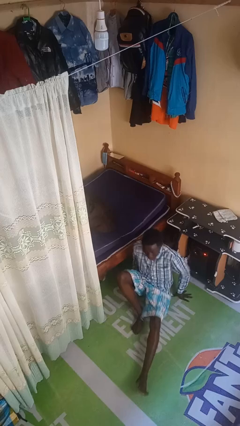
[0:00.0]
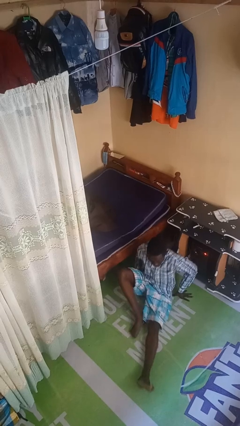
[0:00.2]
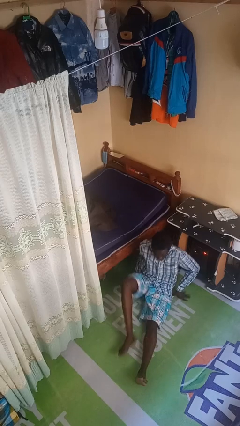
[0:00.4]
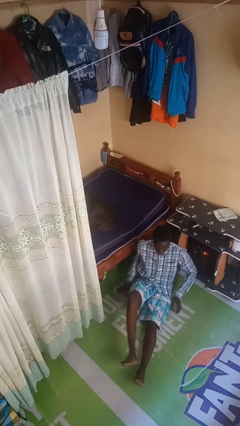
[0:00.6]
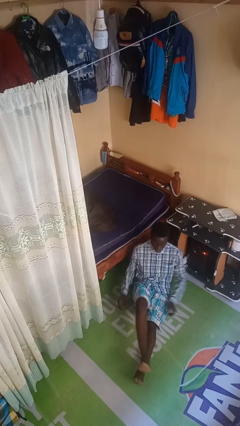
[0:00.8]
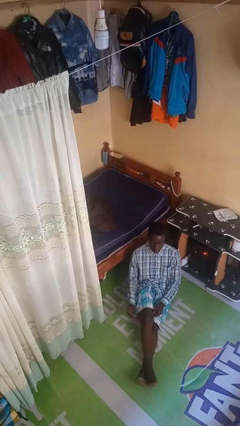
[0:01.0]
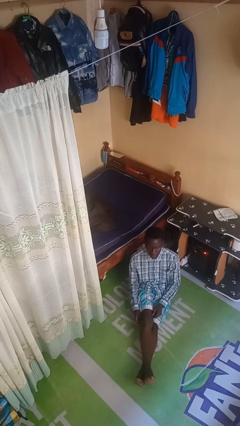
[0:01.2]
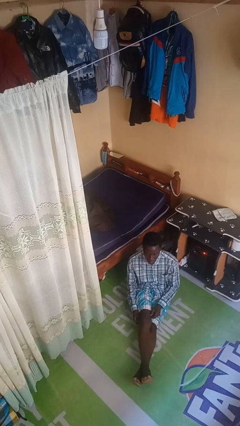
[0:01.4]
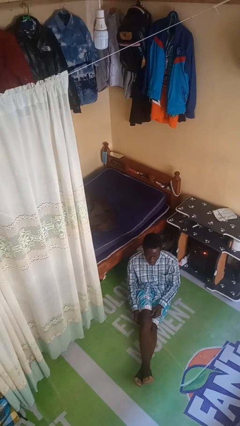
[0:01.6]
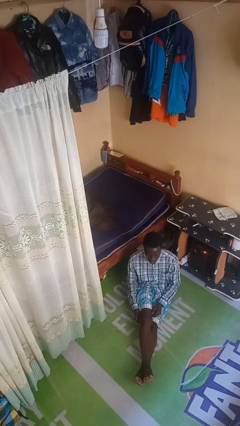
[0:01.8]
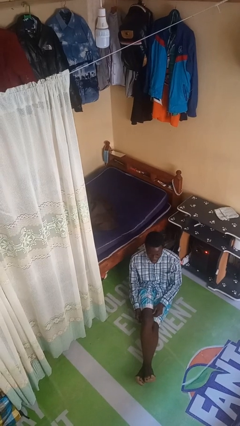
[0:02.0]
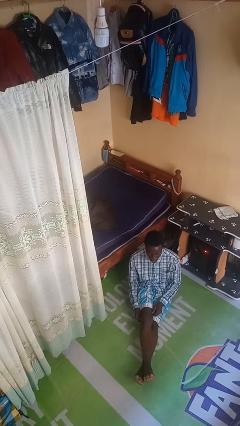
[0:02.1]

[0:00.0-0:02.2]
person sits crisscross

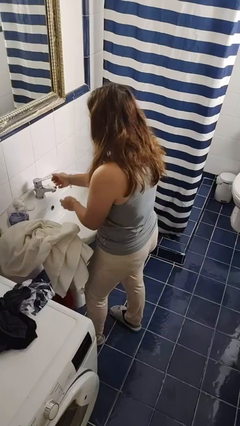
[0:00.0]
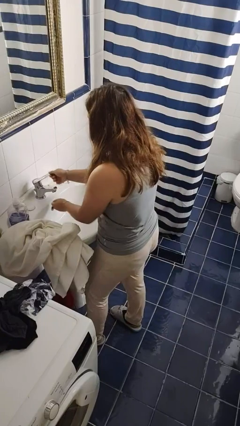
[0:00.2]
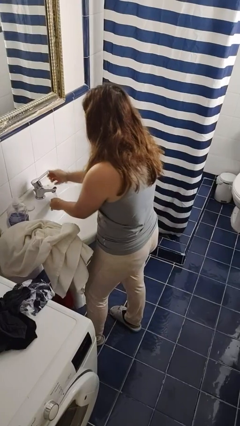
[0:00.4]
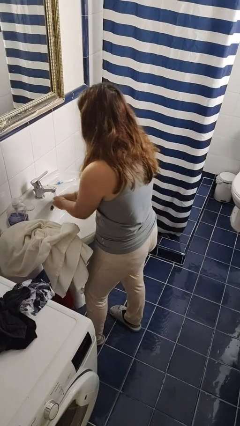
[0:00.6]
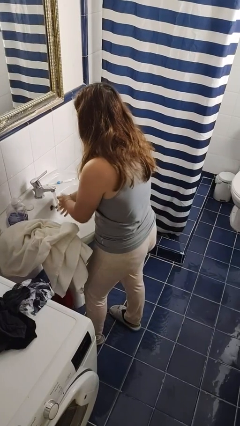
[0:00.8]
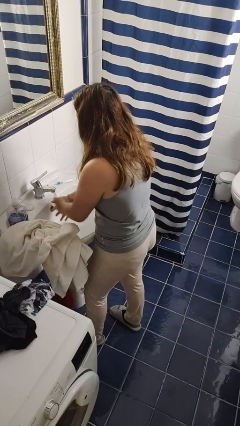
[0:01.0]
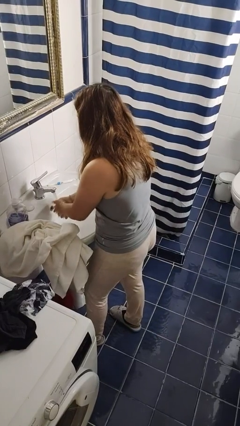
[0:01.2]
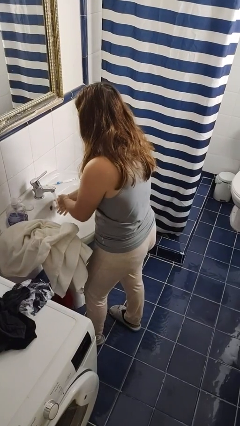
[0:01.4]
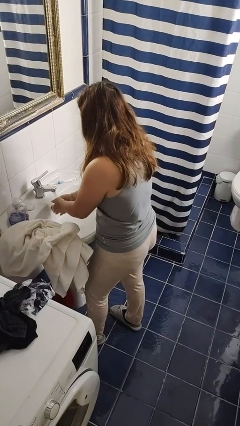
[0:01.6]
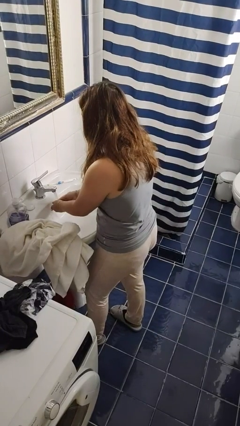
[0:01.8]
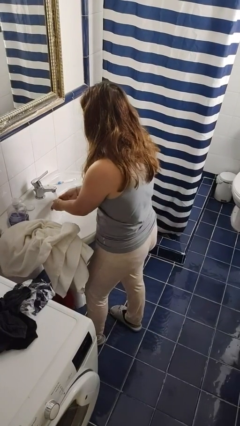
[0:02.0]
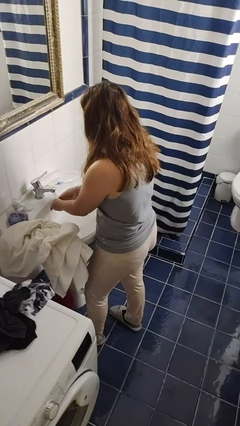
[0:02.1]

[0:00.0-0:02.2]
person washes hands

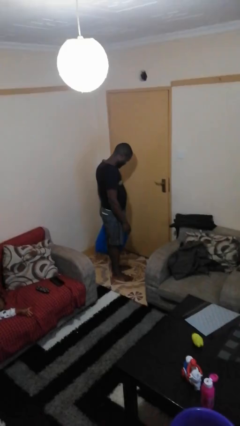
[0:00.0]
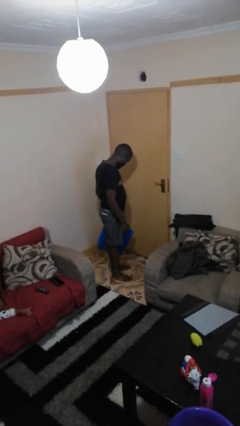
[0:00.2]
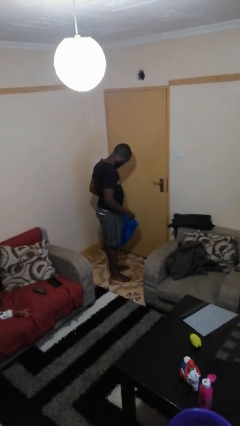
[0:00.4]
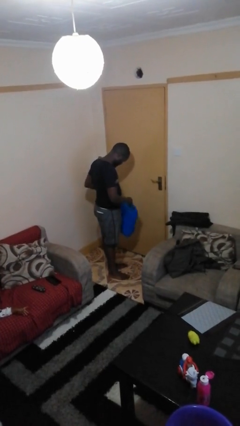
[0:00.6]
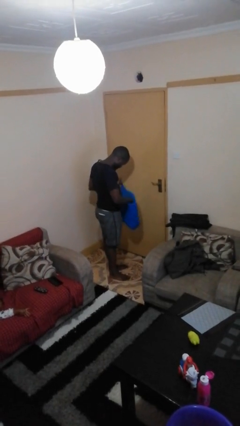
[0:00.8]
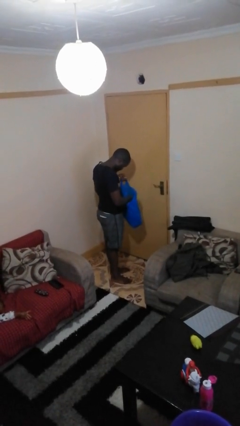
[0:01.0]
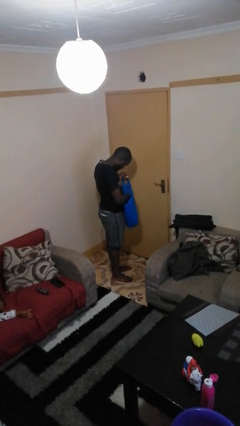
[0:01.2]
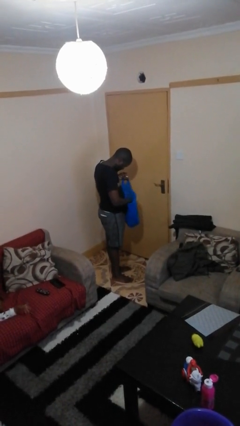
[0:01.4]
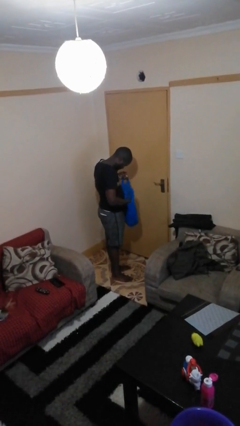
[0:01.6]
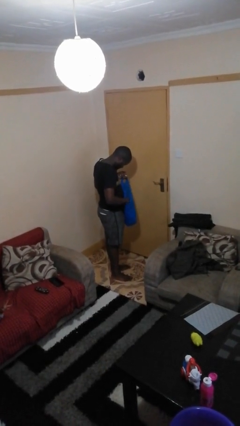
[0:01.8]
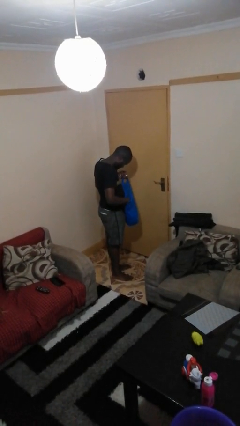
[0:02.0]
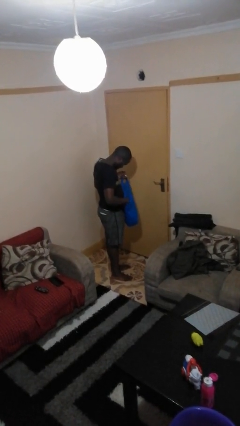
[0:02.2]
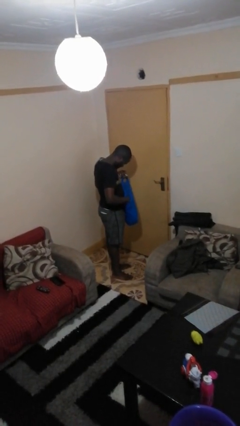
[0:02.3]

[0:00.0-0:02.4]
person searches in bag

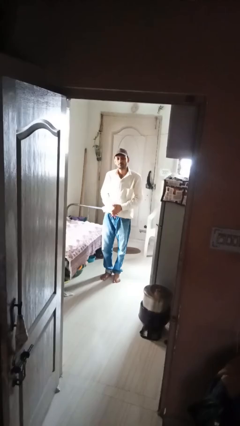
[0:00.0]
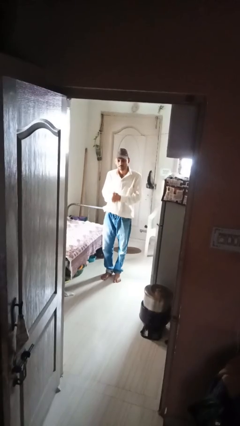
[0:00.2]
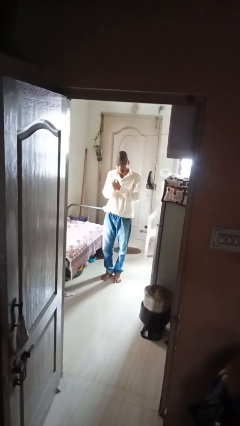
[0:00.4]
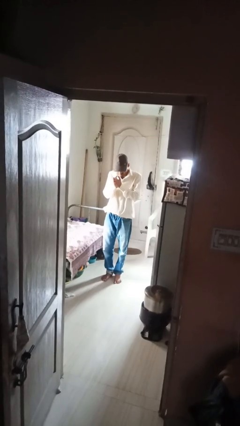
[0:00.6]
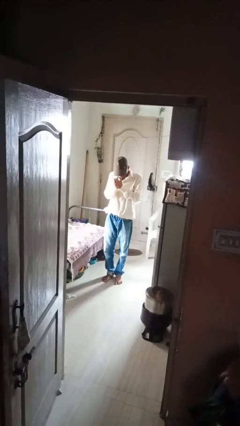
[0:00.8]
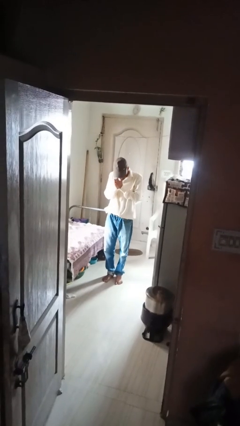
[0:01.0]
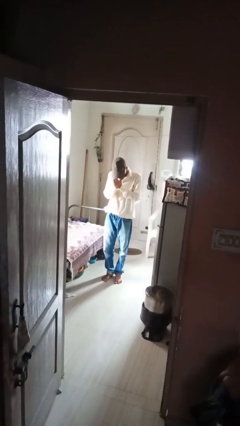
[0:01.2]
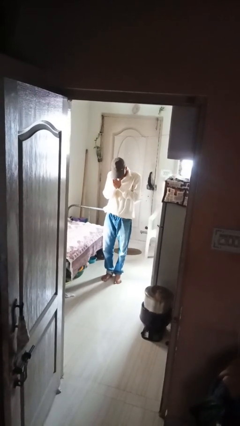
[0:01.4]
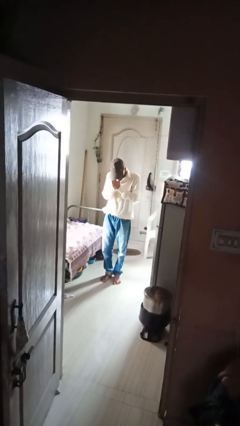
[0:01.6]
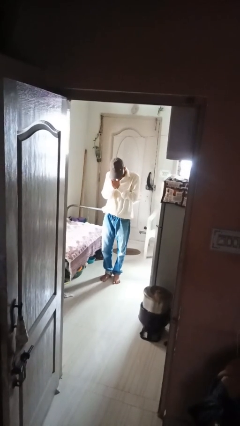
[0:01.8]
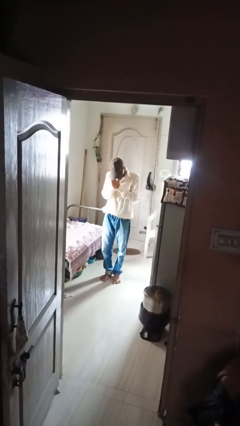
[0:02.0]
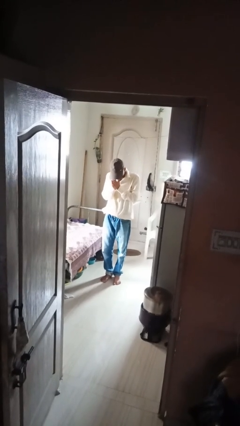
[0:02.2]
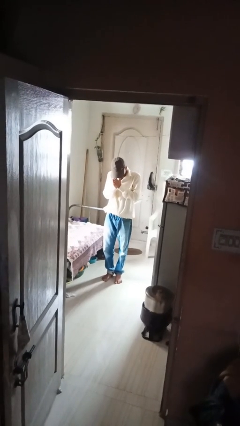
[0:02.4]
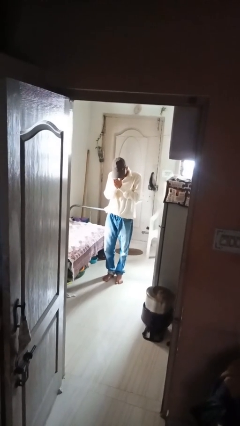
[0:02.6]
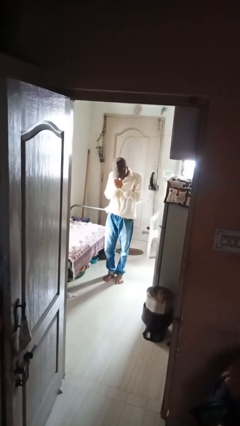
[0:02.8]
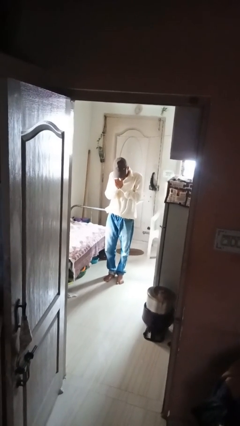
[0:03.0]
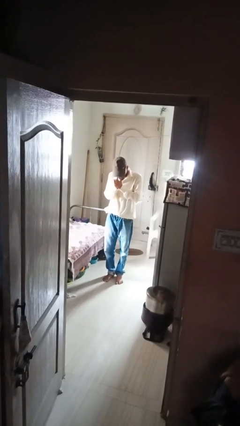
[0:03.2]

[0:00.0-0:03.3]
person prays

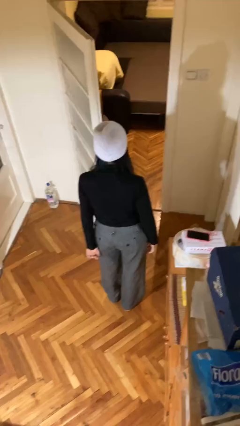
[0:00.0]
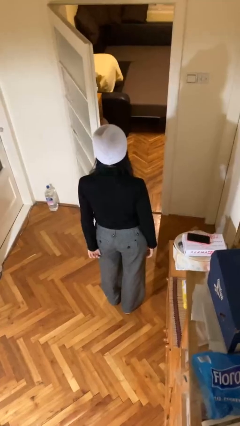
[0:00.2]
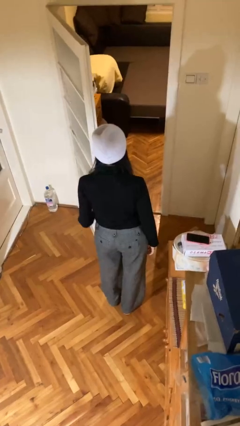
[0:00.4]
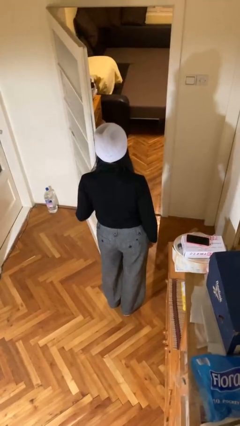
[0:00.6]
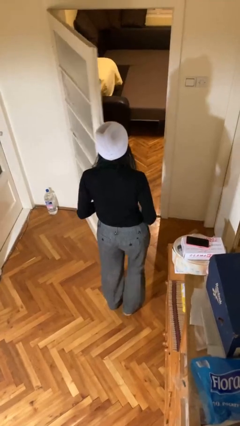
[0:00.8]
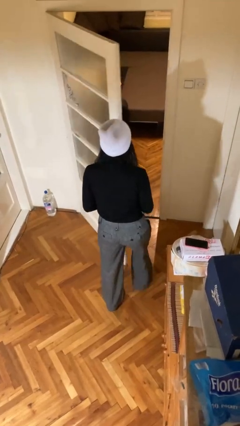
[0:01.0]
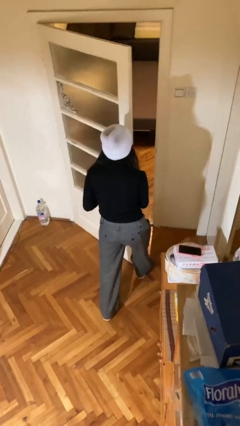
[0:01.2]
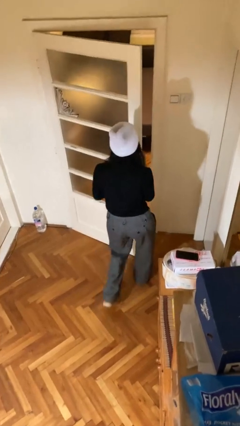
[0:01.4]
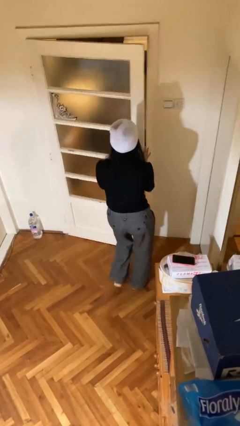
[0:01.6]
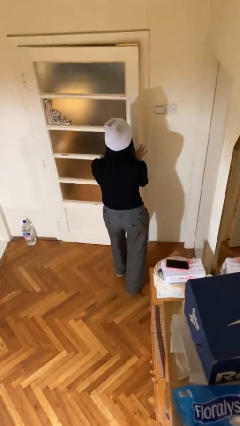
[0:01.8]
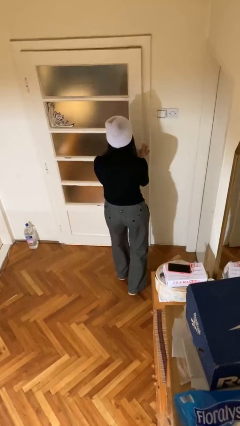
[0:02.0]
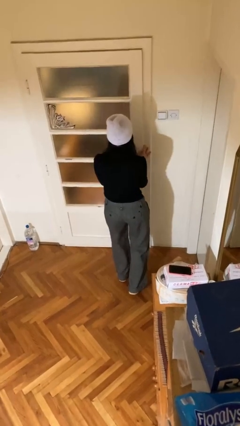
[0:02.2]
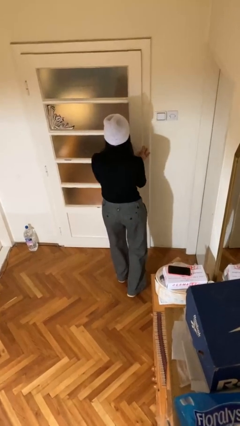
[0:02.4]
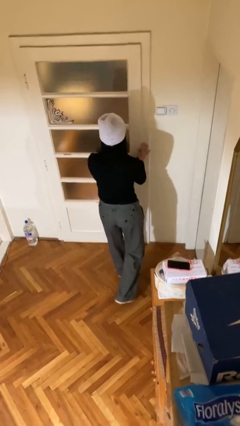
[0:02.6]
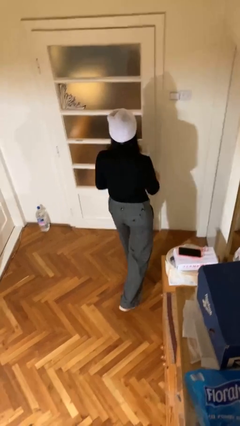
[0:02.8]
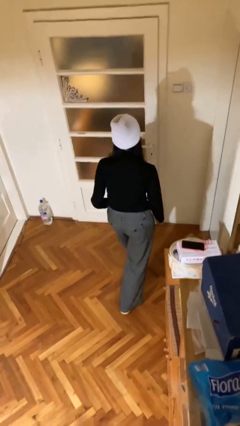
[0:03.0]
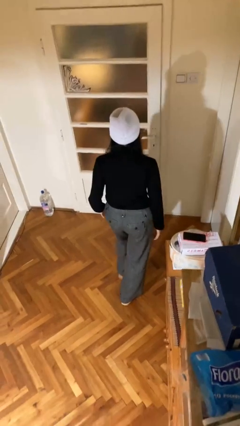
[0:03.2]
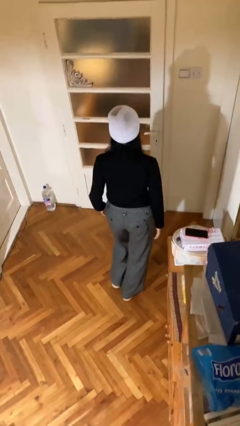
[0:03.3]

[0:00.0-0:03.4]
person closes facility door

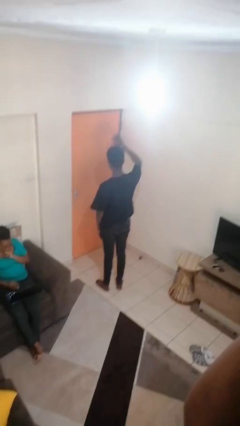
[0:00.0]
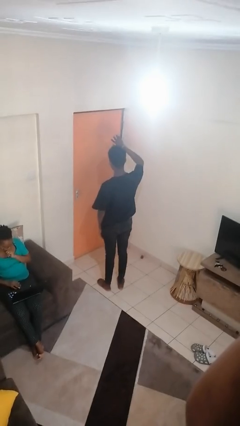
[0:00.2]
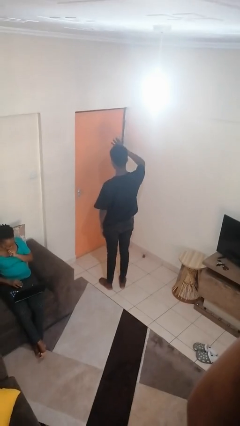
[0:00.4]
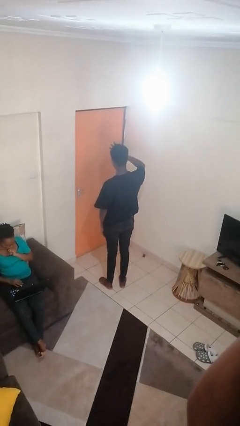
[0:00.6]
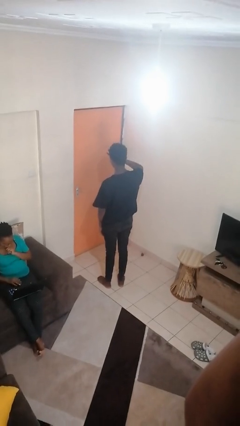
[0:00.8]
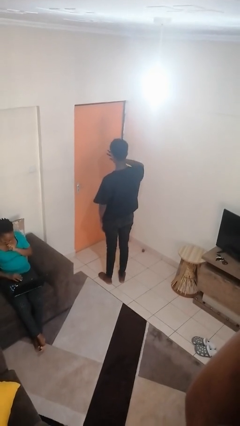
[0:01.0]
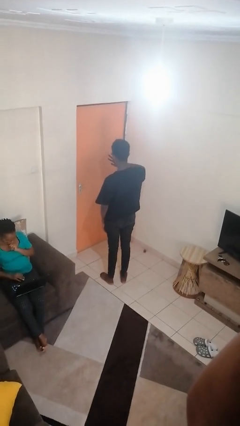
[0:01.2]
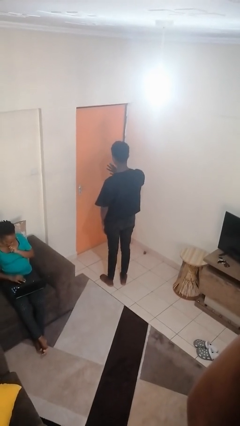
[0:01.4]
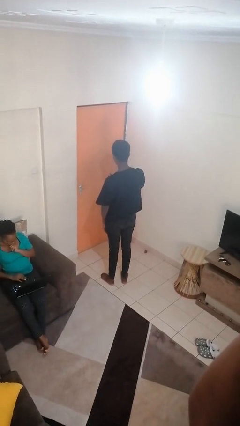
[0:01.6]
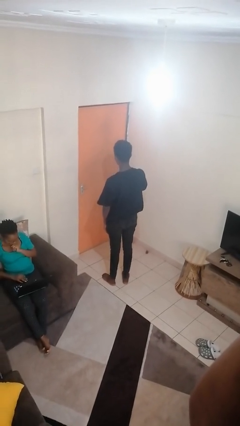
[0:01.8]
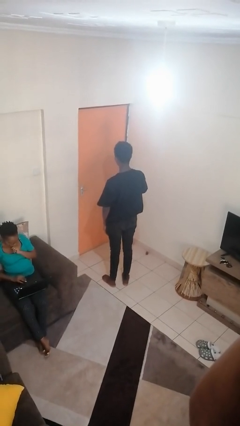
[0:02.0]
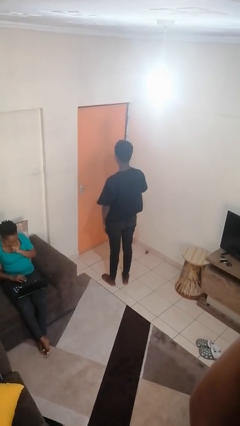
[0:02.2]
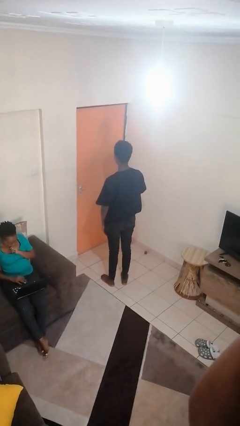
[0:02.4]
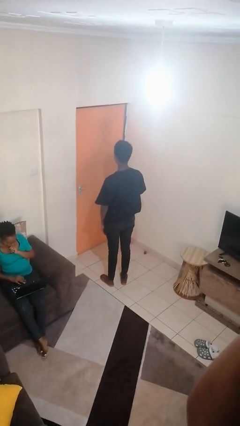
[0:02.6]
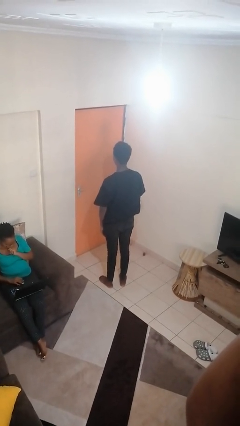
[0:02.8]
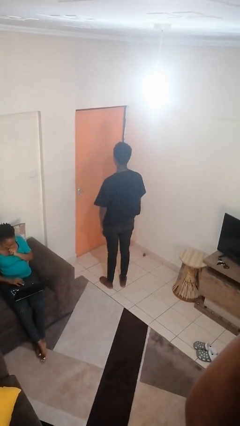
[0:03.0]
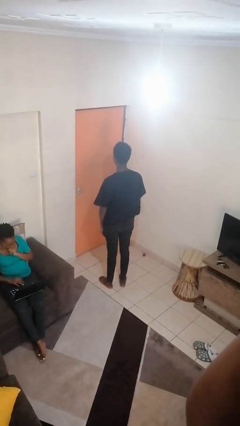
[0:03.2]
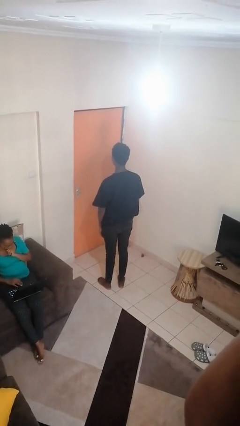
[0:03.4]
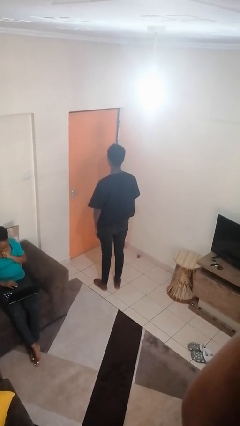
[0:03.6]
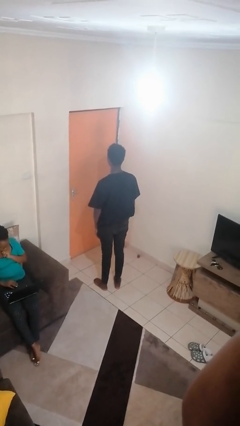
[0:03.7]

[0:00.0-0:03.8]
person gestures swipe down
